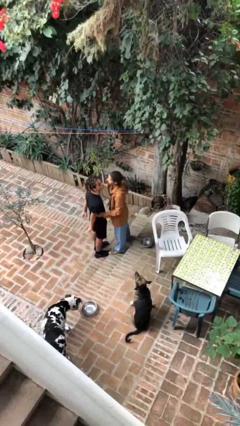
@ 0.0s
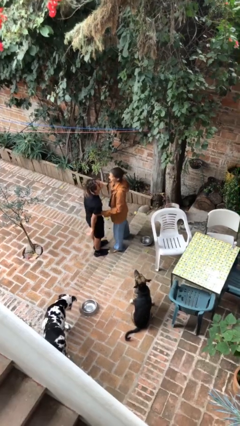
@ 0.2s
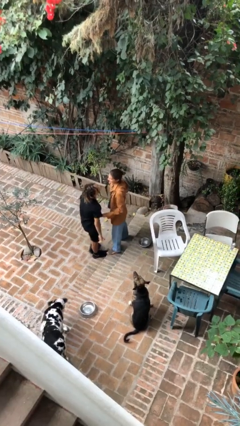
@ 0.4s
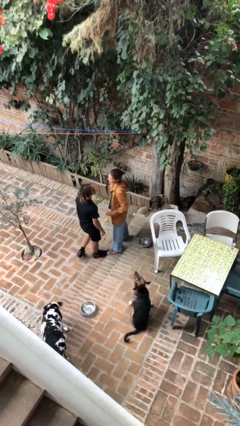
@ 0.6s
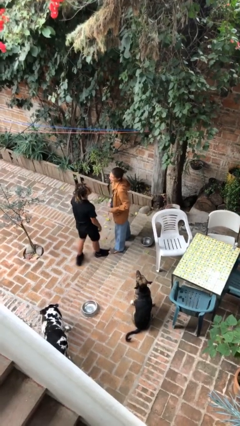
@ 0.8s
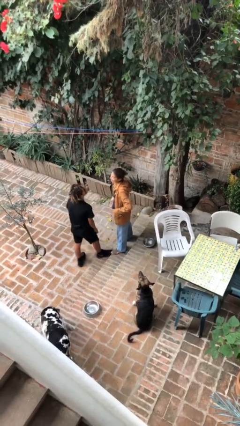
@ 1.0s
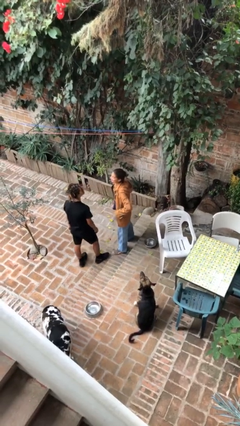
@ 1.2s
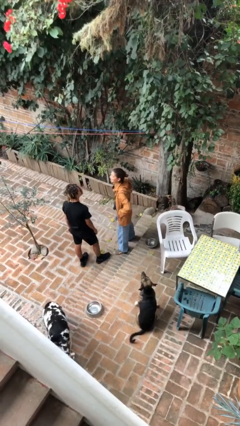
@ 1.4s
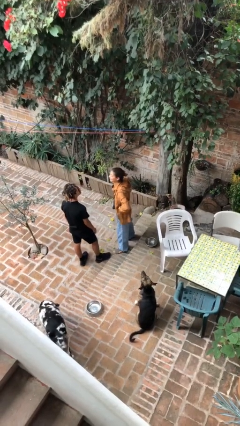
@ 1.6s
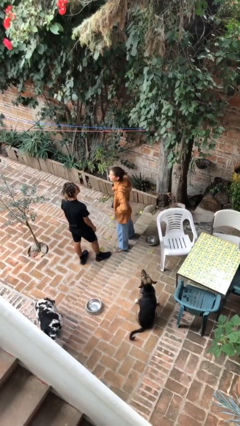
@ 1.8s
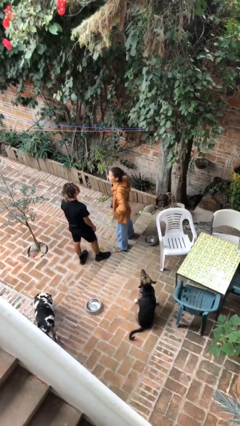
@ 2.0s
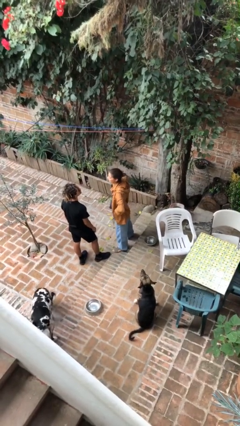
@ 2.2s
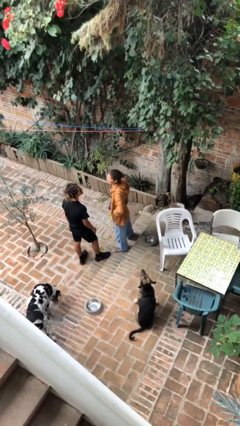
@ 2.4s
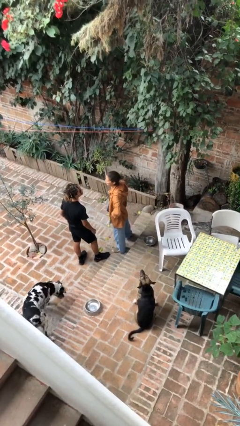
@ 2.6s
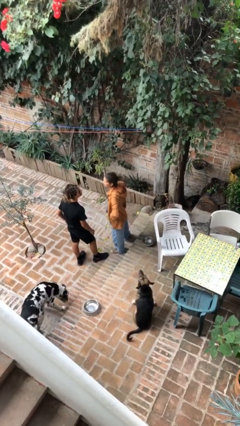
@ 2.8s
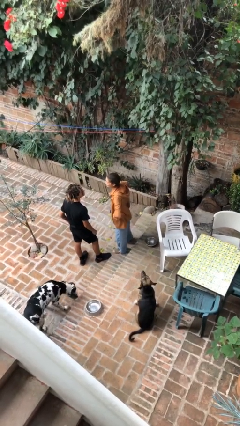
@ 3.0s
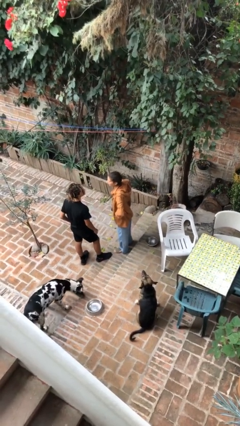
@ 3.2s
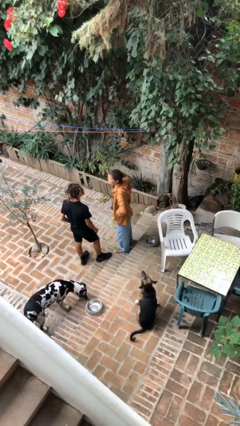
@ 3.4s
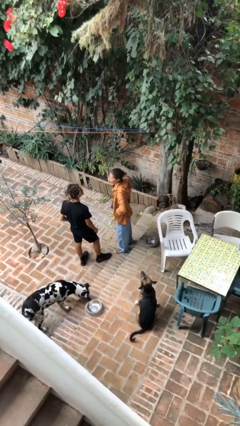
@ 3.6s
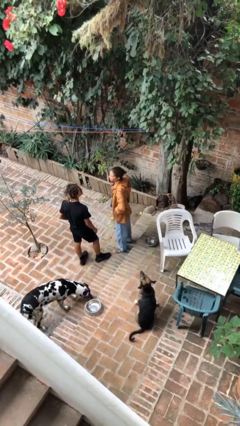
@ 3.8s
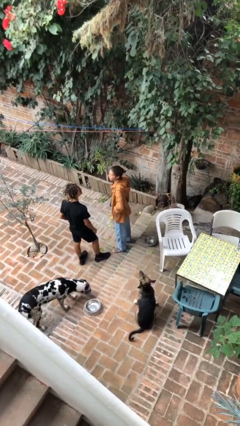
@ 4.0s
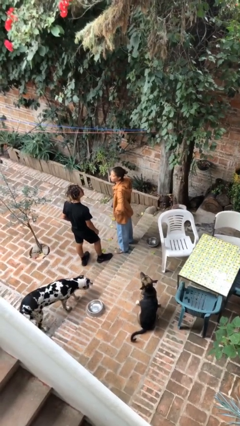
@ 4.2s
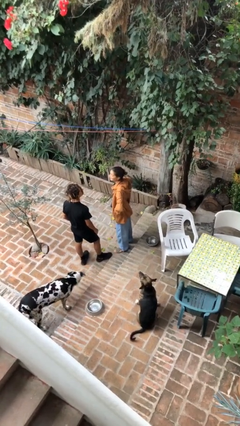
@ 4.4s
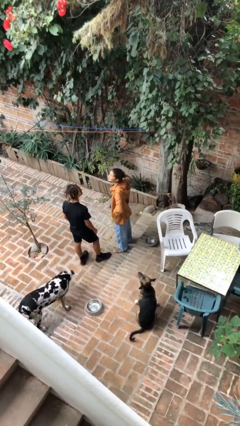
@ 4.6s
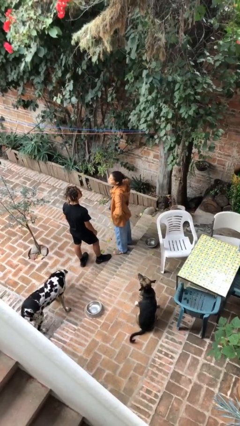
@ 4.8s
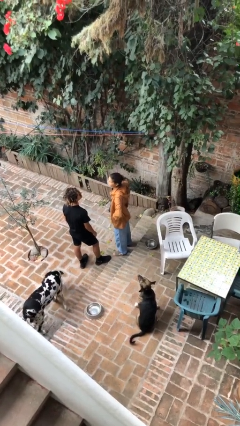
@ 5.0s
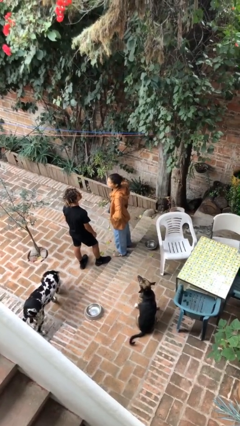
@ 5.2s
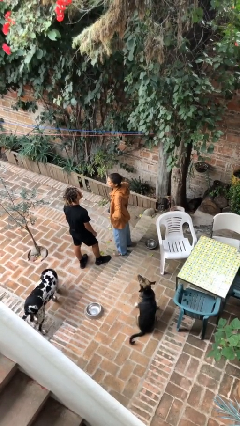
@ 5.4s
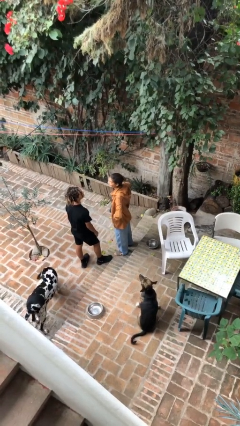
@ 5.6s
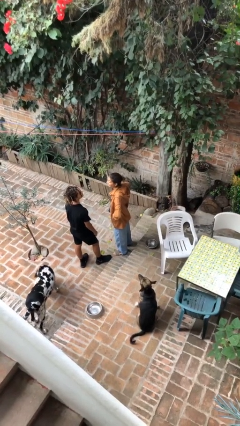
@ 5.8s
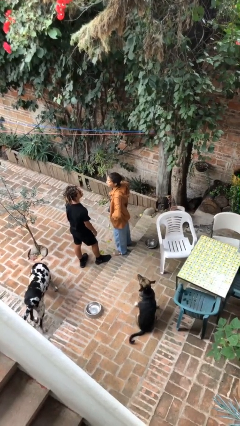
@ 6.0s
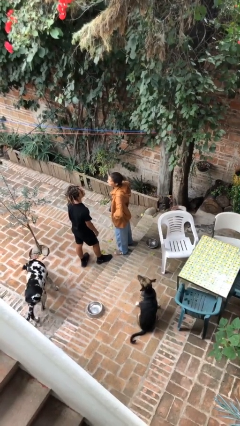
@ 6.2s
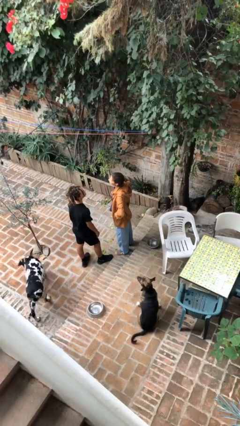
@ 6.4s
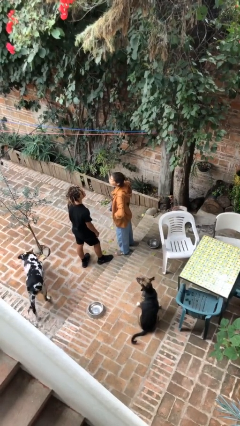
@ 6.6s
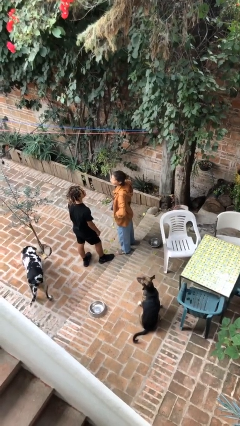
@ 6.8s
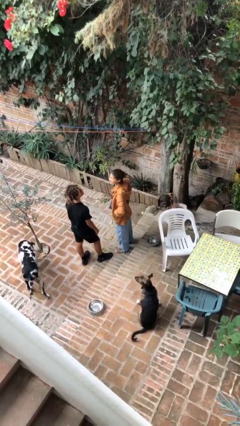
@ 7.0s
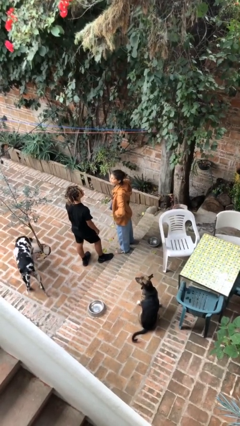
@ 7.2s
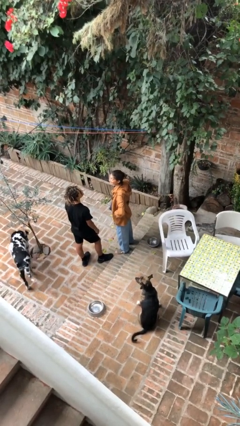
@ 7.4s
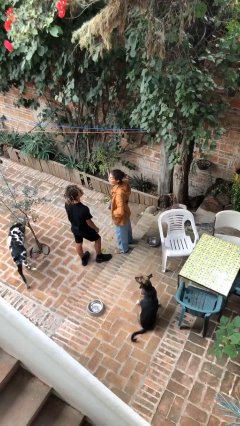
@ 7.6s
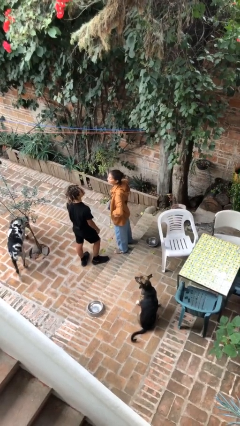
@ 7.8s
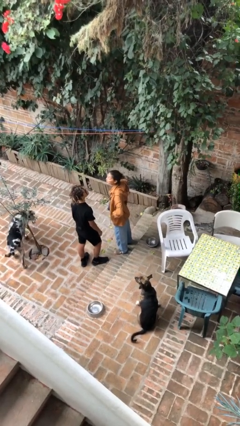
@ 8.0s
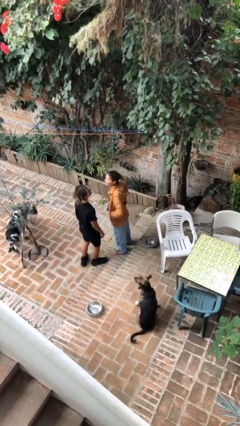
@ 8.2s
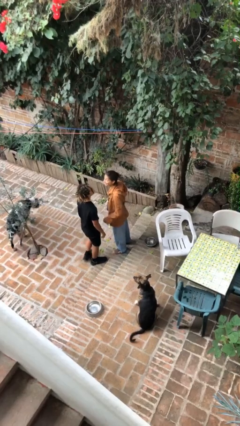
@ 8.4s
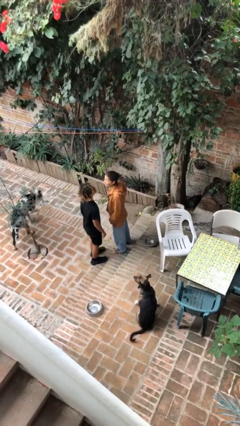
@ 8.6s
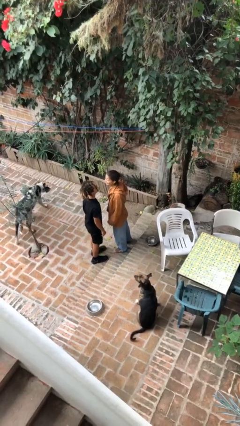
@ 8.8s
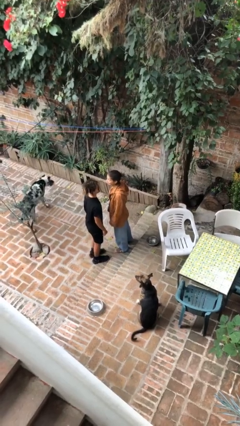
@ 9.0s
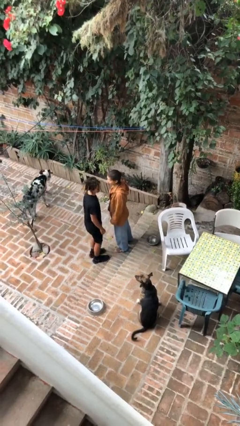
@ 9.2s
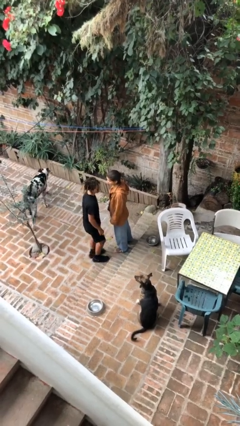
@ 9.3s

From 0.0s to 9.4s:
person talks to person

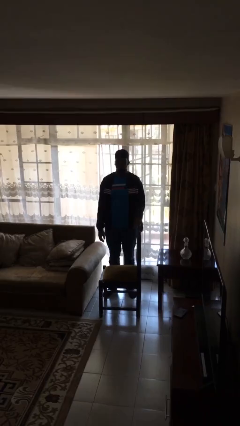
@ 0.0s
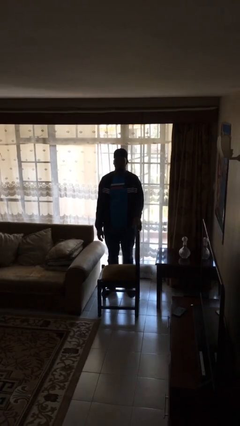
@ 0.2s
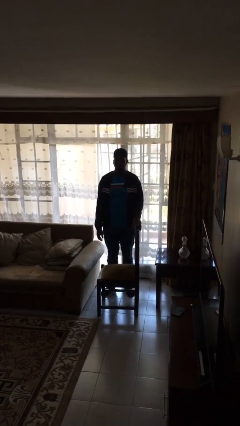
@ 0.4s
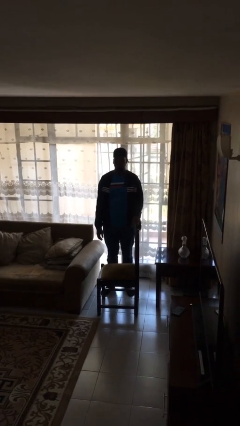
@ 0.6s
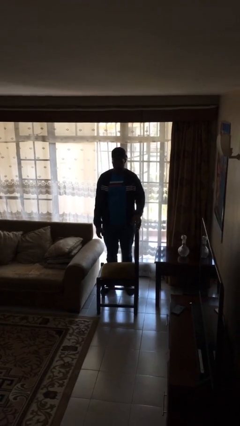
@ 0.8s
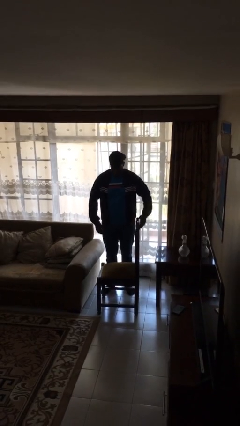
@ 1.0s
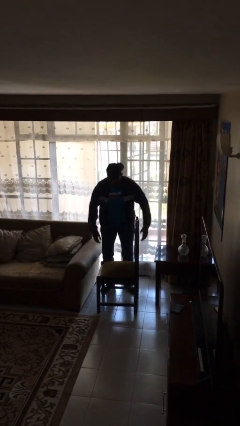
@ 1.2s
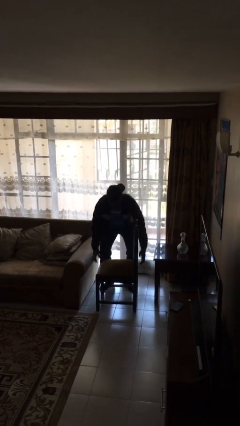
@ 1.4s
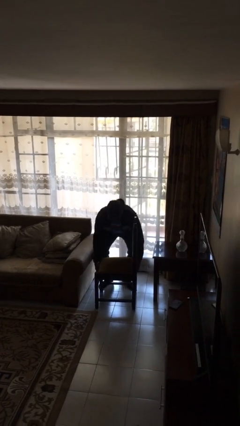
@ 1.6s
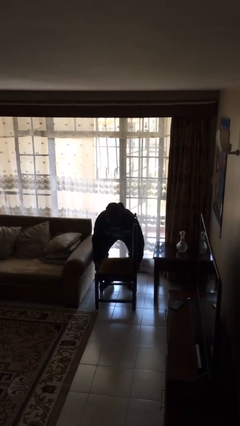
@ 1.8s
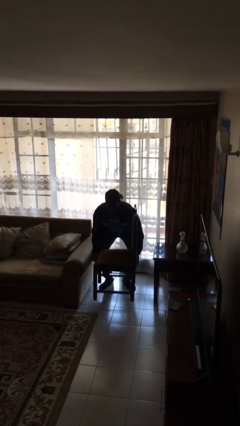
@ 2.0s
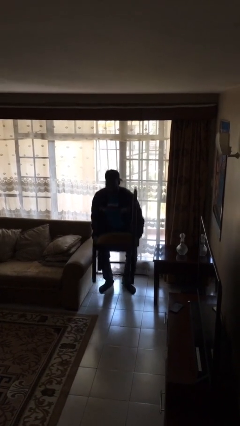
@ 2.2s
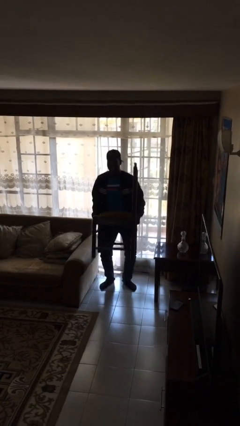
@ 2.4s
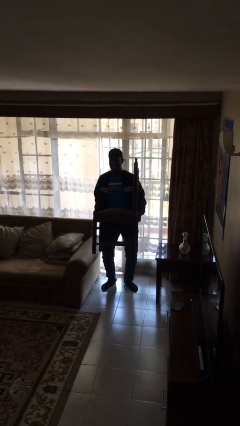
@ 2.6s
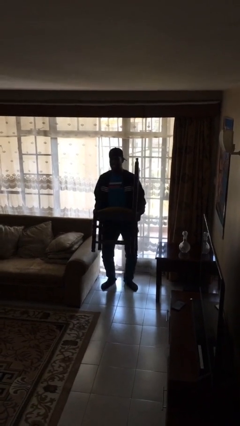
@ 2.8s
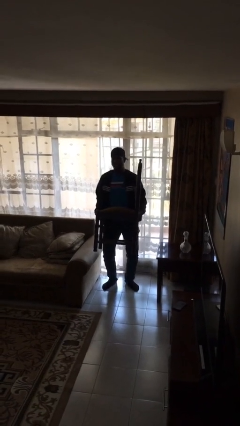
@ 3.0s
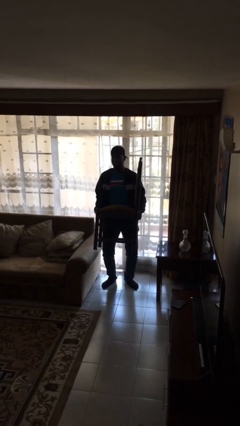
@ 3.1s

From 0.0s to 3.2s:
person picks up object from floor

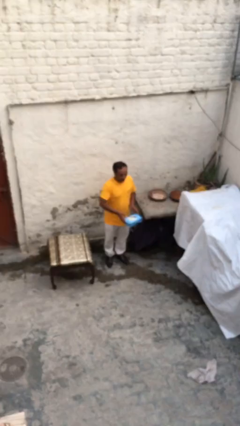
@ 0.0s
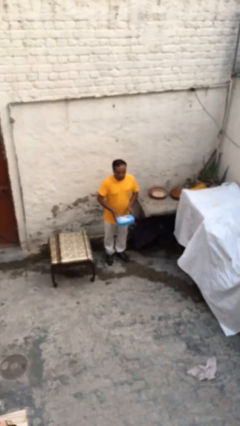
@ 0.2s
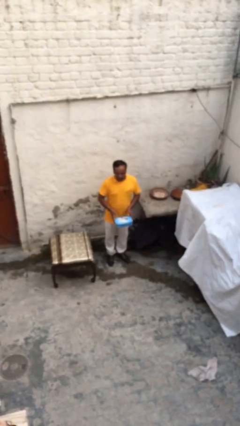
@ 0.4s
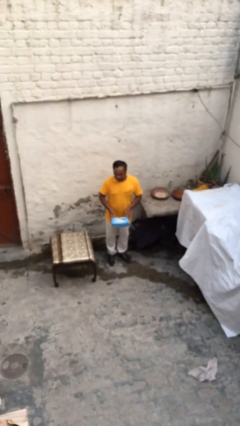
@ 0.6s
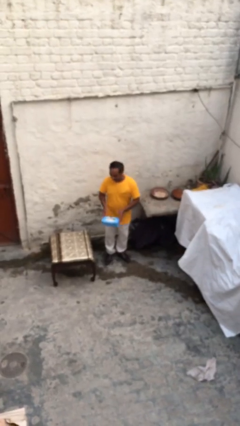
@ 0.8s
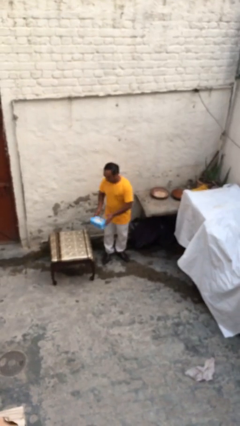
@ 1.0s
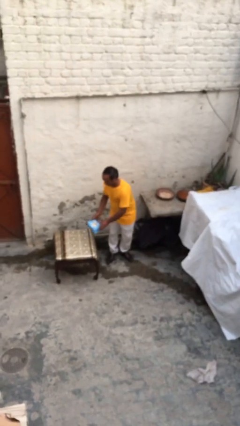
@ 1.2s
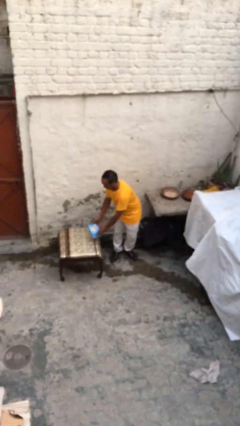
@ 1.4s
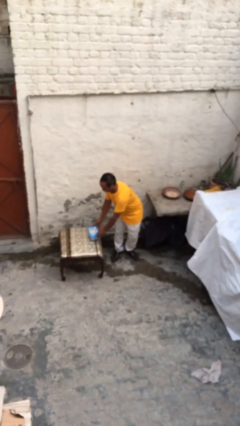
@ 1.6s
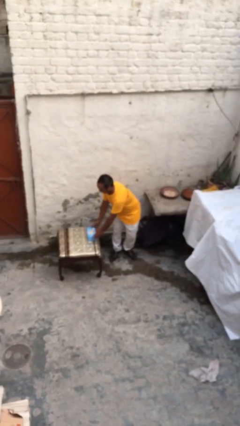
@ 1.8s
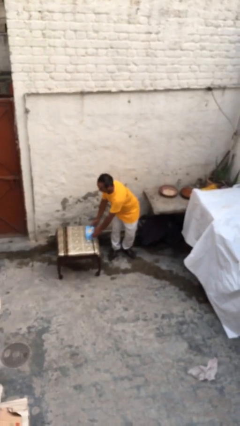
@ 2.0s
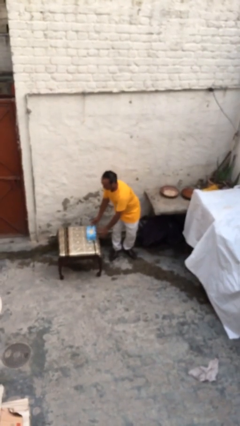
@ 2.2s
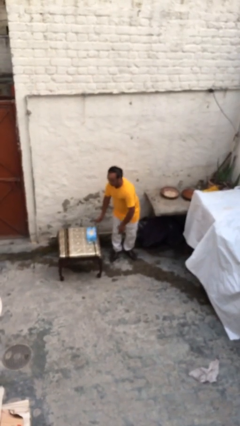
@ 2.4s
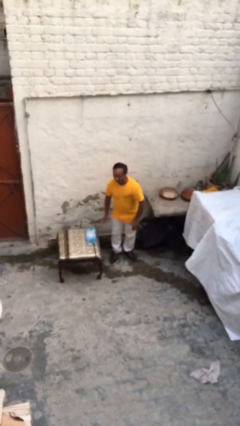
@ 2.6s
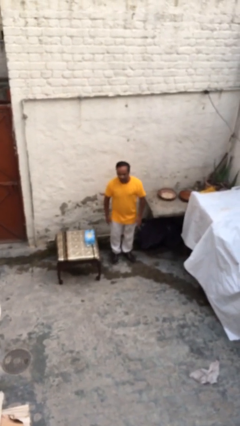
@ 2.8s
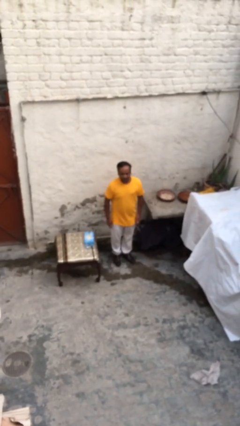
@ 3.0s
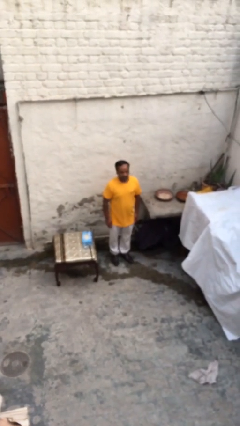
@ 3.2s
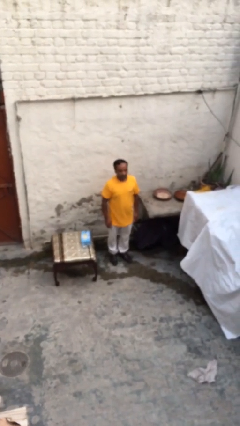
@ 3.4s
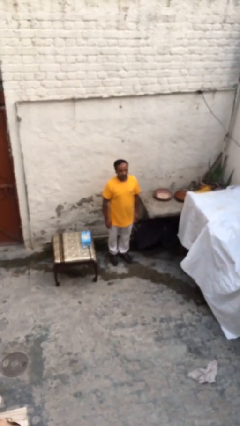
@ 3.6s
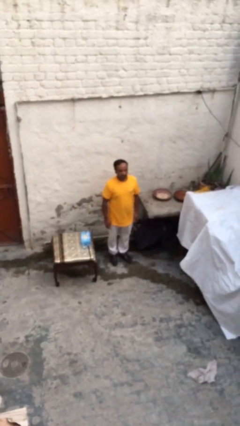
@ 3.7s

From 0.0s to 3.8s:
person puts down object on table

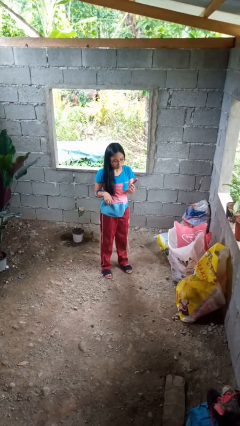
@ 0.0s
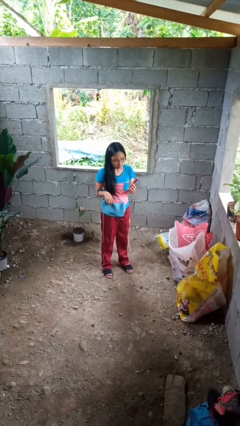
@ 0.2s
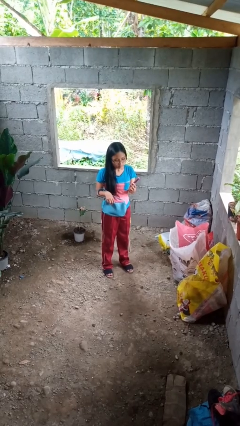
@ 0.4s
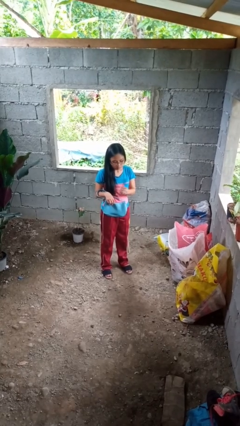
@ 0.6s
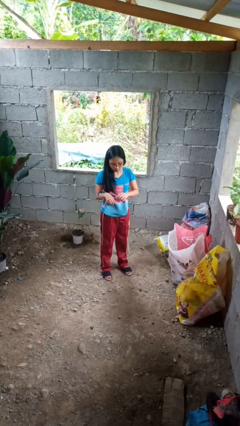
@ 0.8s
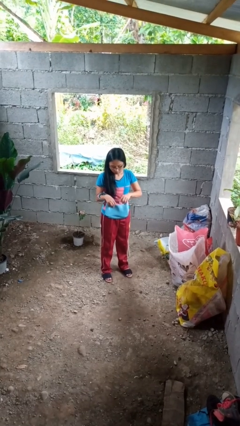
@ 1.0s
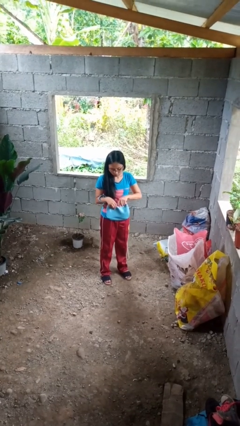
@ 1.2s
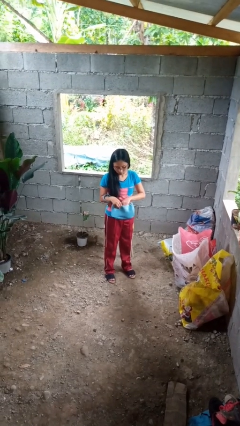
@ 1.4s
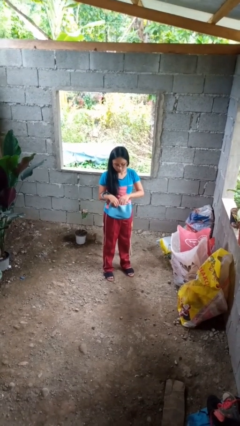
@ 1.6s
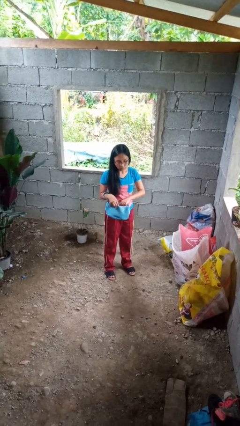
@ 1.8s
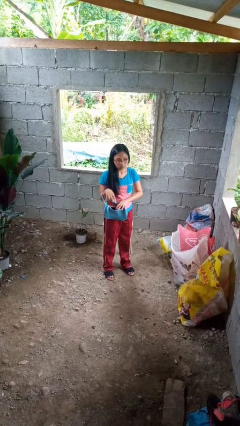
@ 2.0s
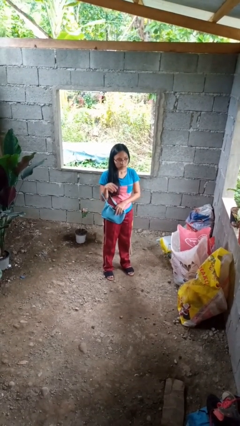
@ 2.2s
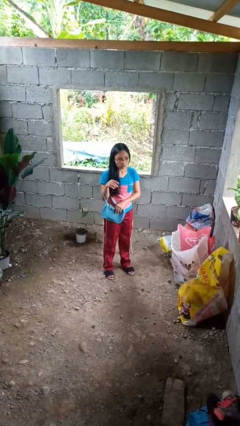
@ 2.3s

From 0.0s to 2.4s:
person puts object into purse
